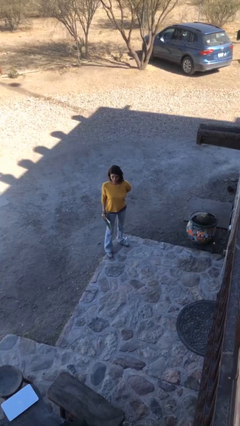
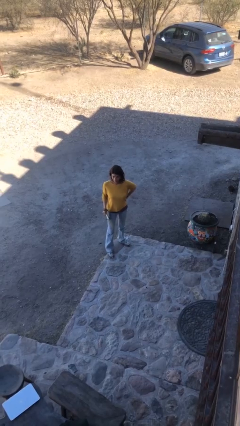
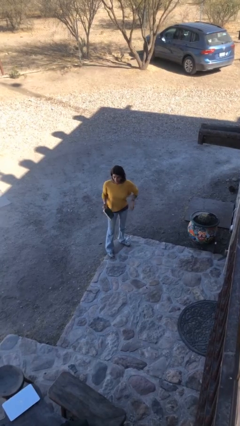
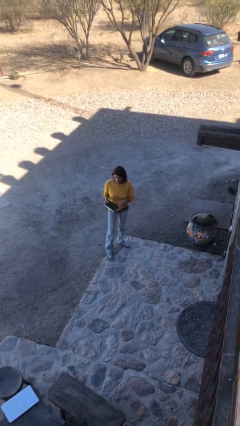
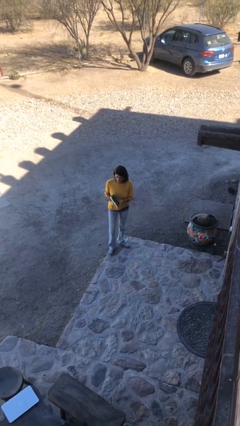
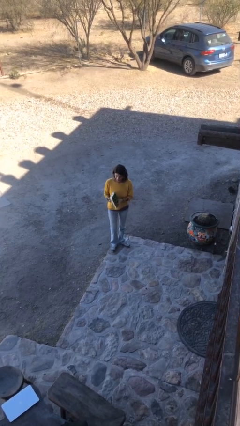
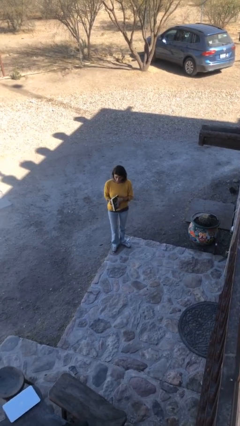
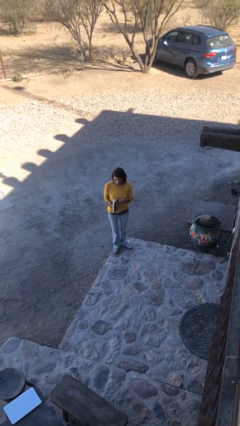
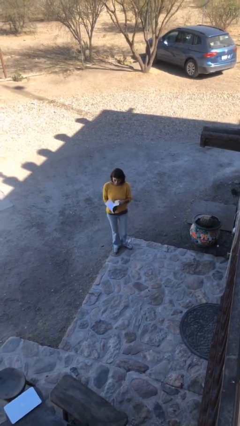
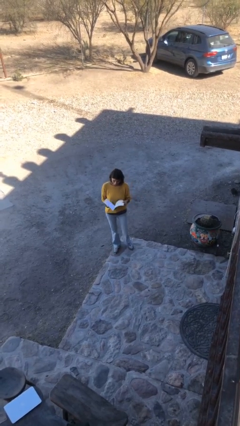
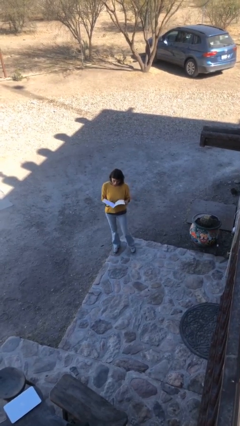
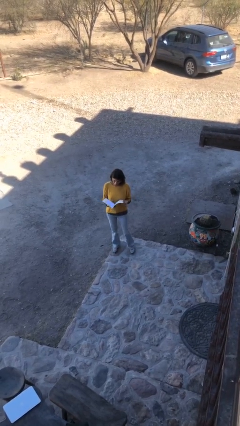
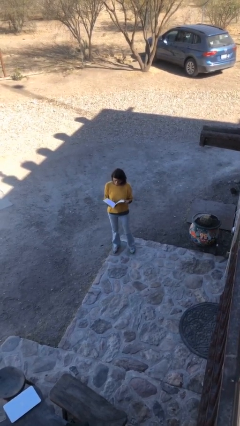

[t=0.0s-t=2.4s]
person reads document

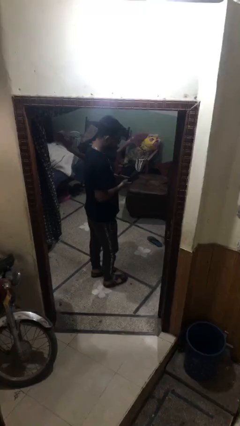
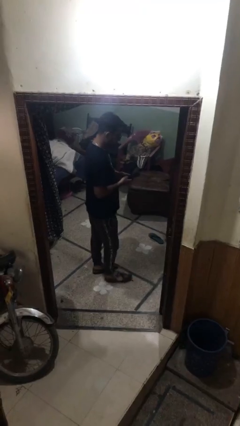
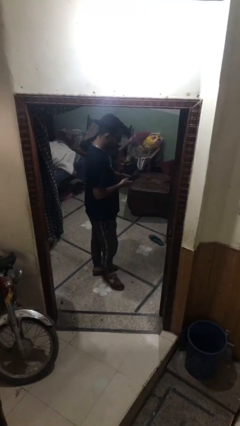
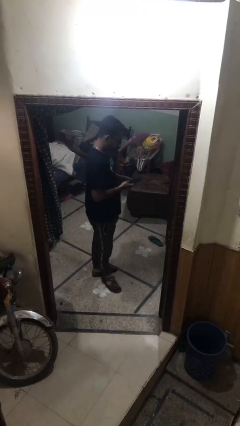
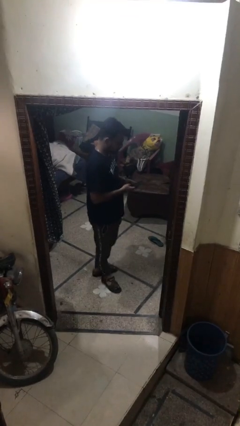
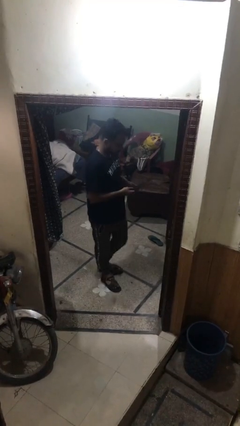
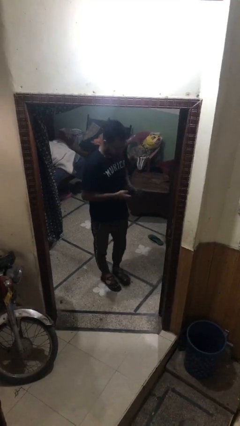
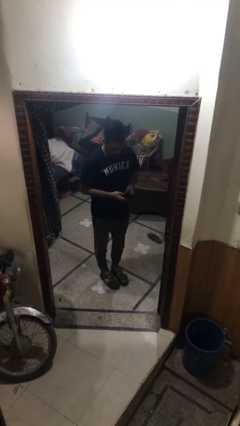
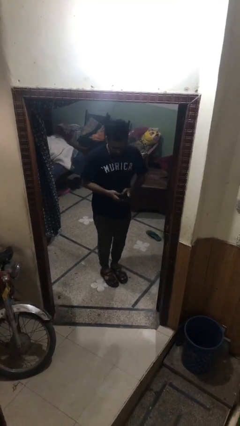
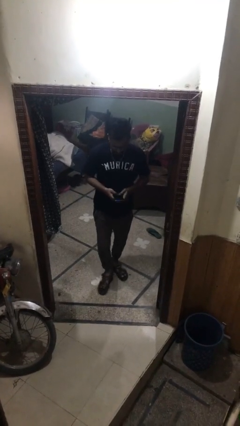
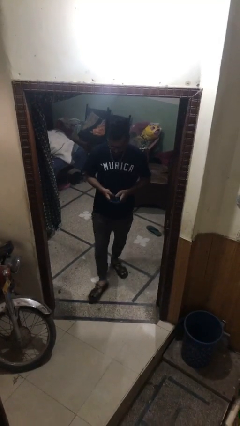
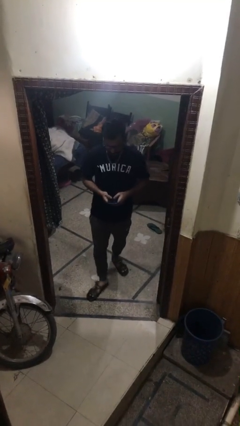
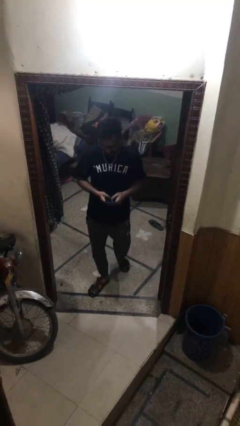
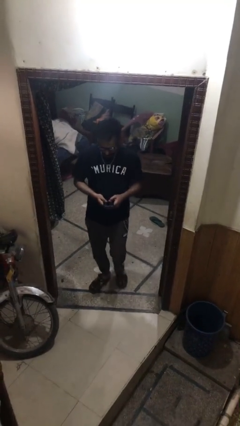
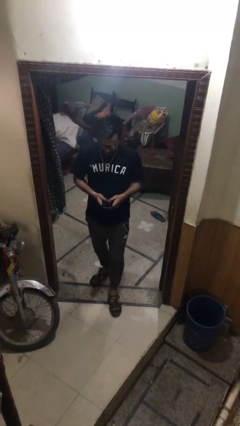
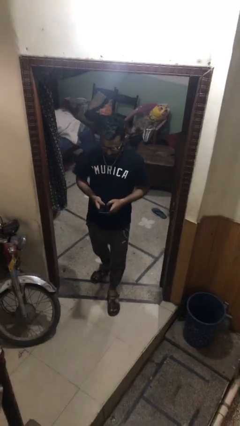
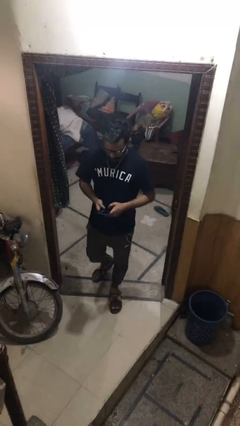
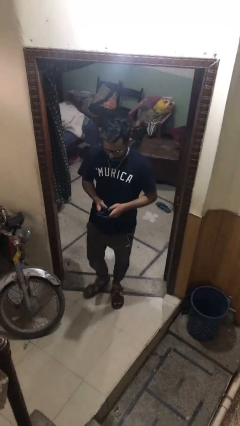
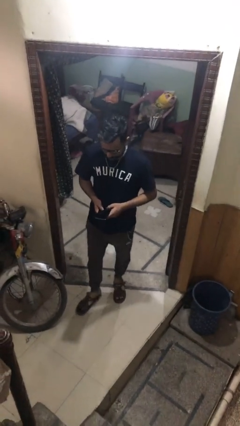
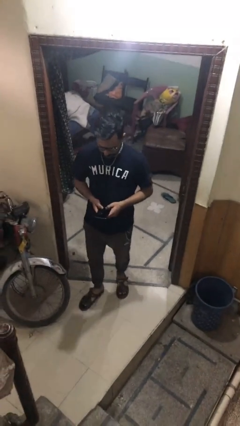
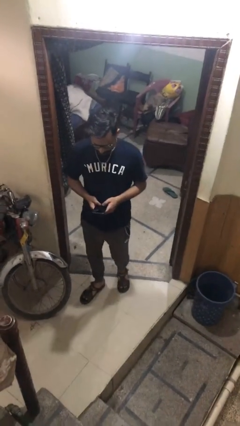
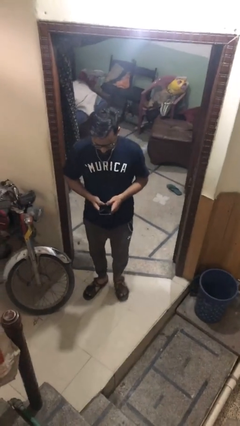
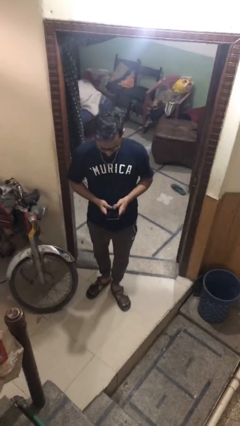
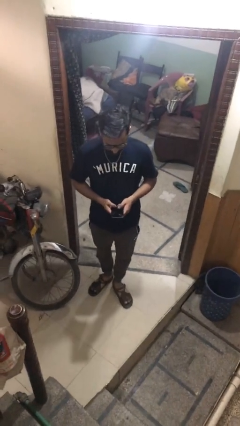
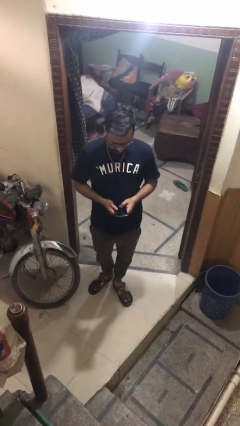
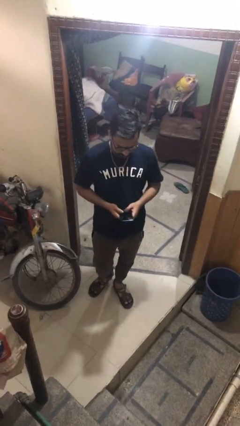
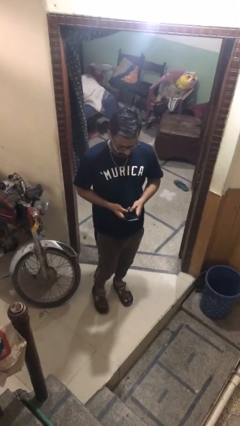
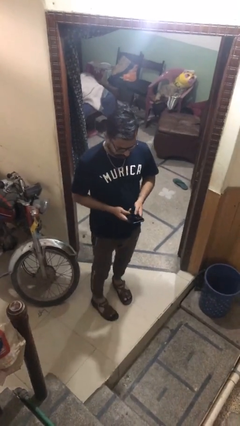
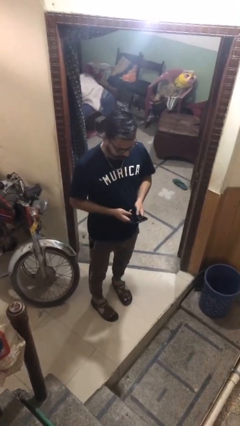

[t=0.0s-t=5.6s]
person enters scene through structure

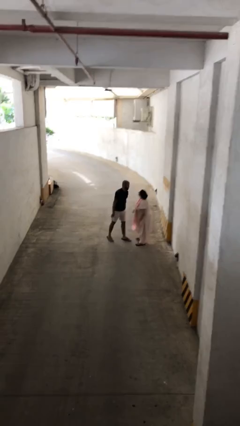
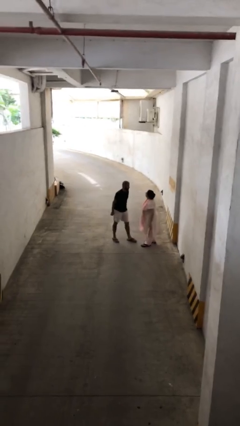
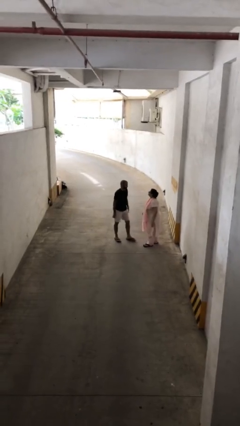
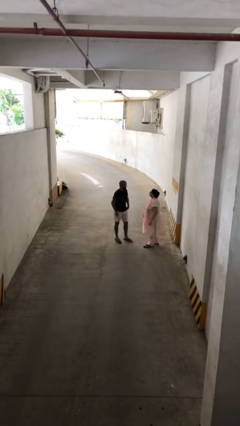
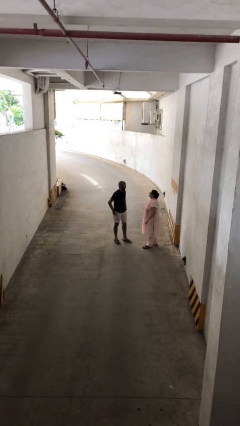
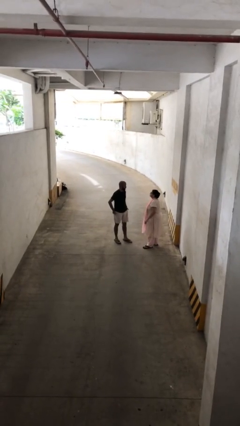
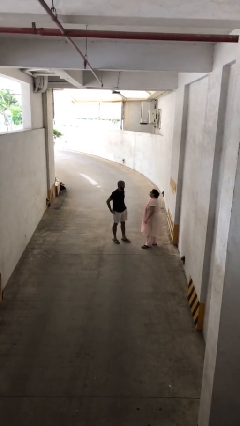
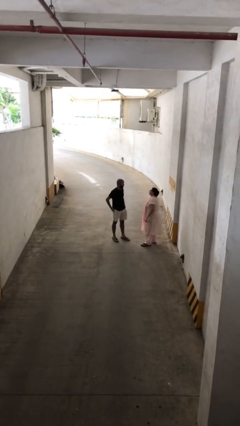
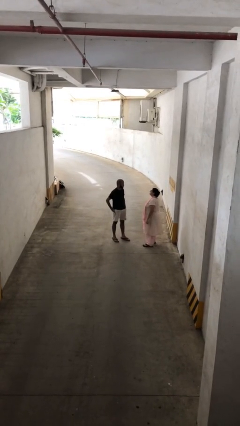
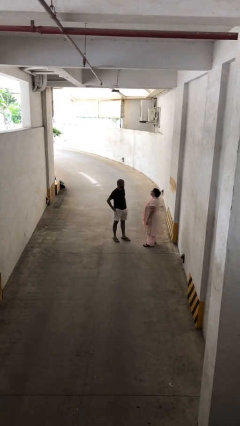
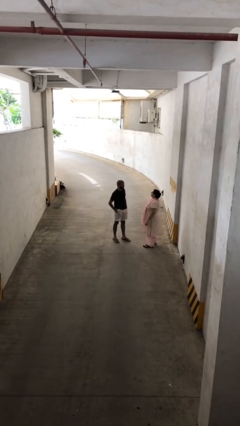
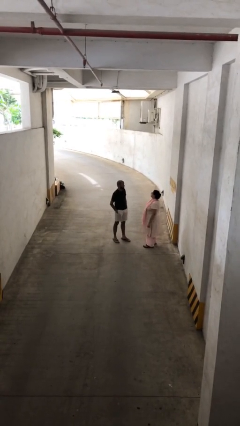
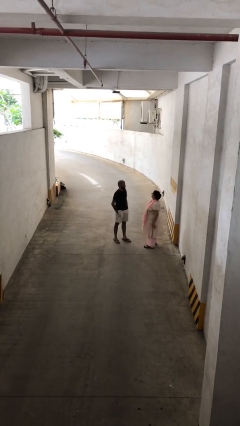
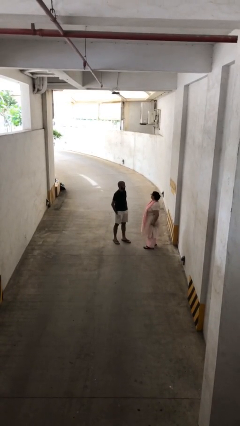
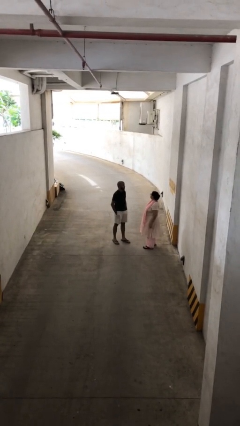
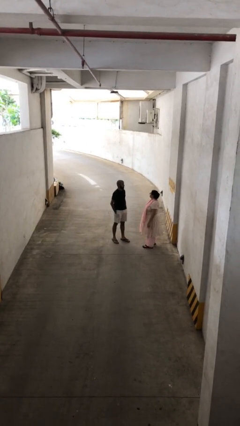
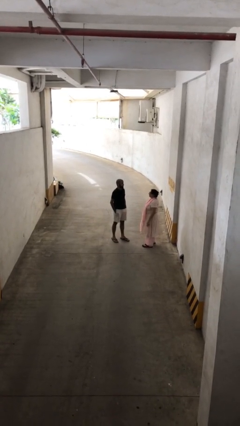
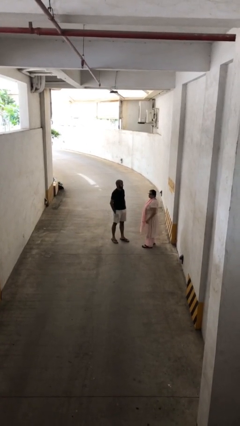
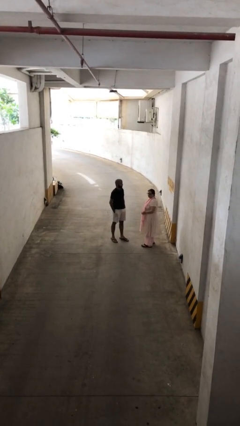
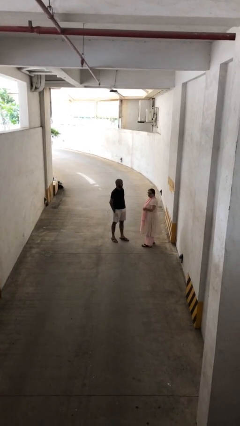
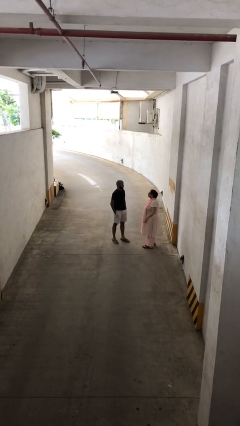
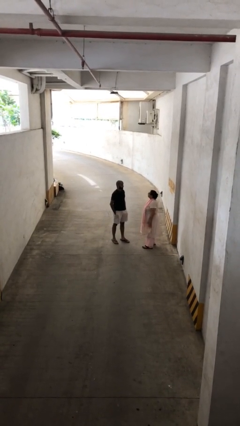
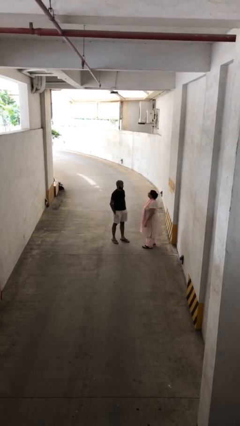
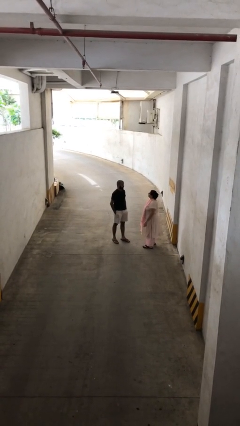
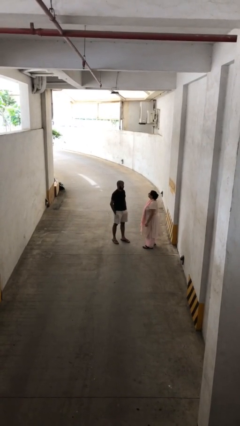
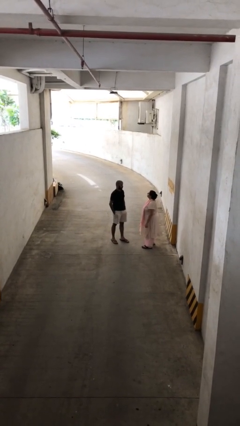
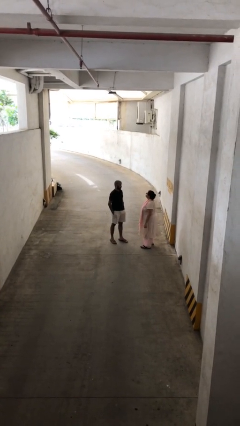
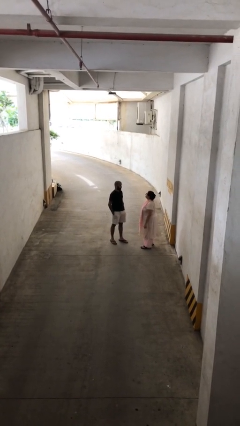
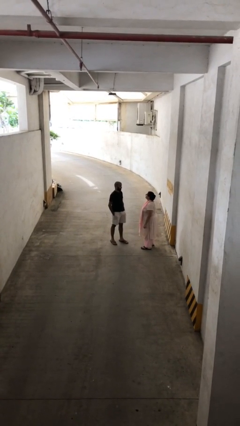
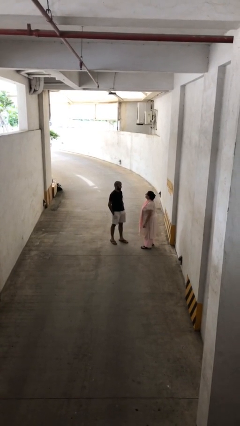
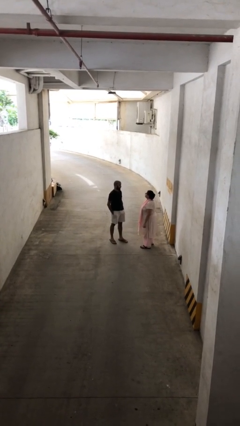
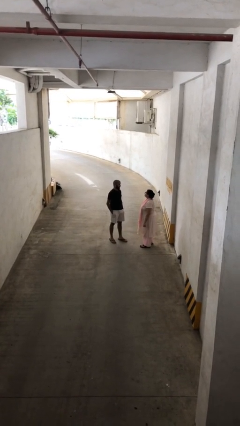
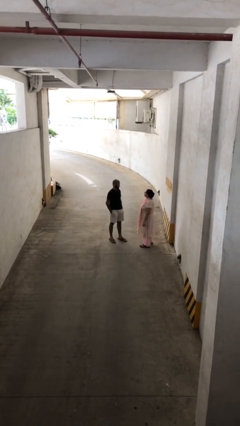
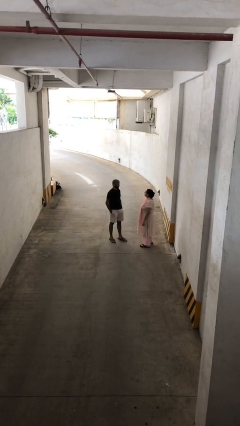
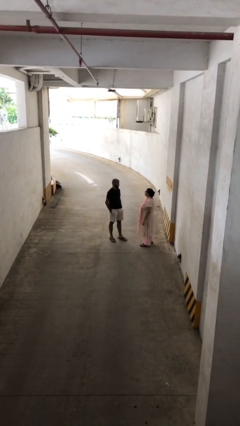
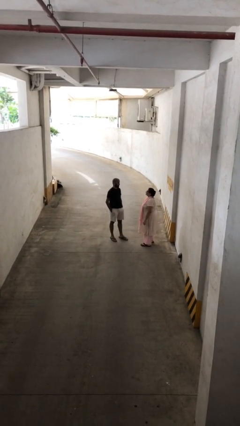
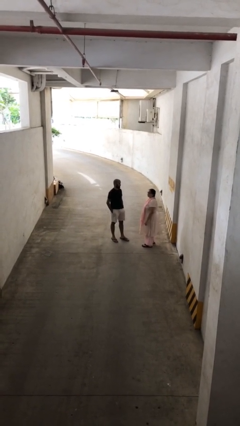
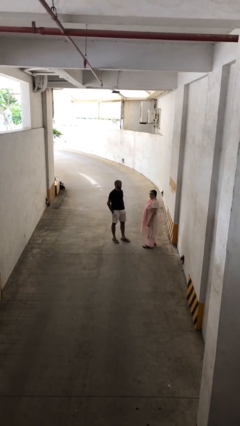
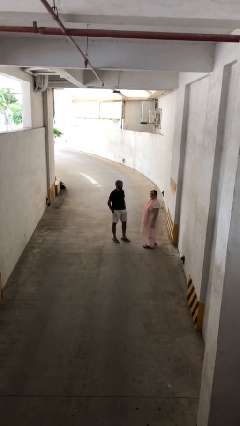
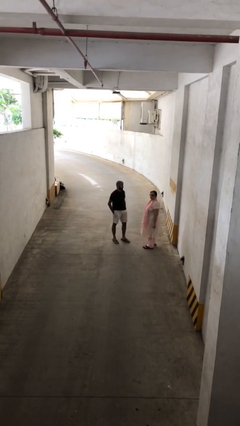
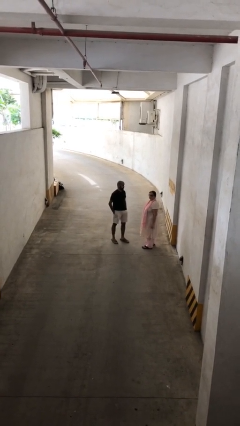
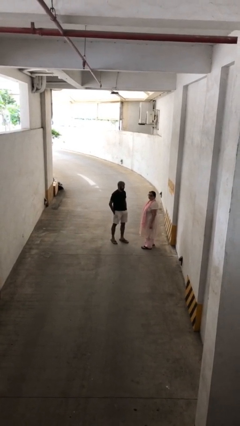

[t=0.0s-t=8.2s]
person talks to person

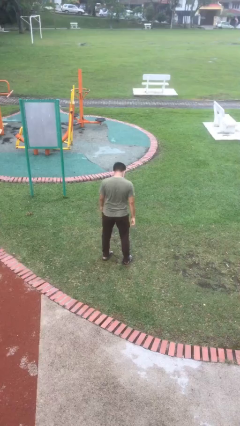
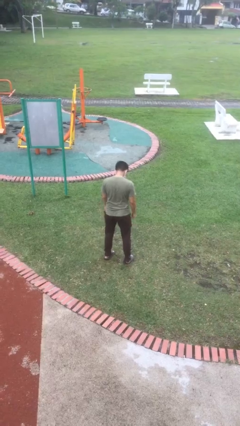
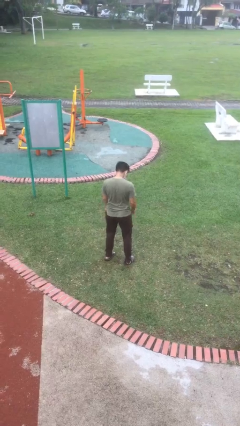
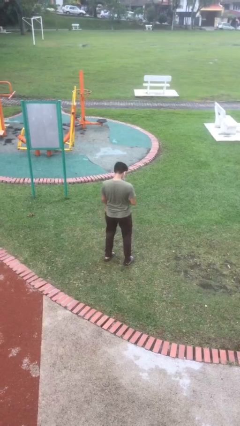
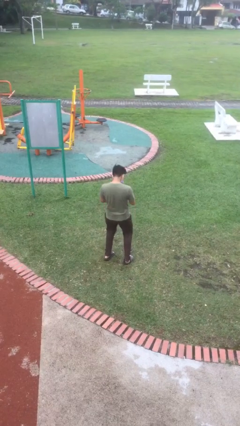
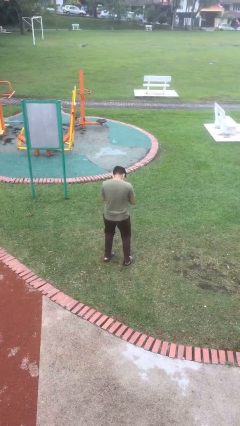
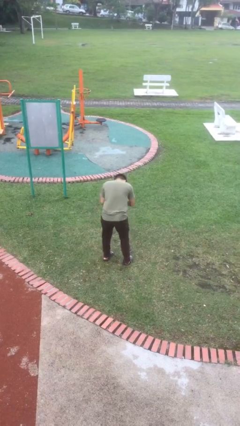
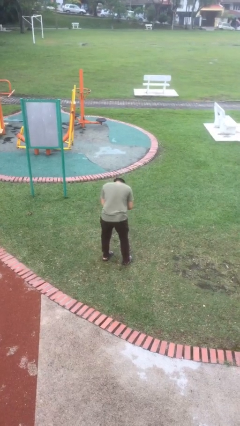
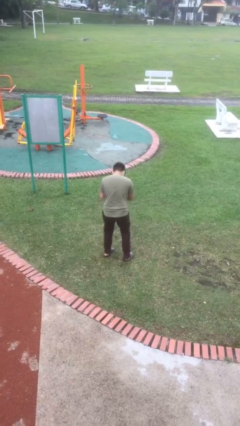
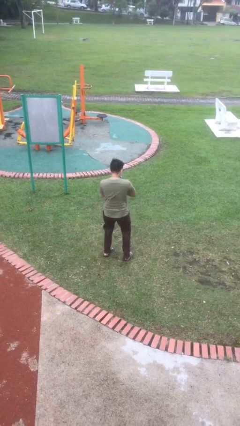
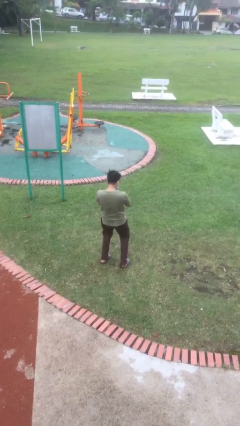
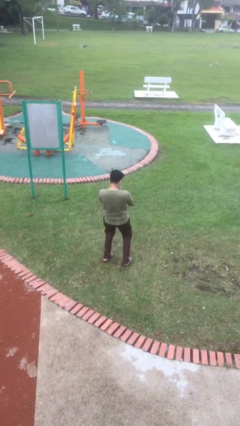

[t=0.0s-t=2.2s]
person dances in place
